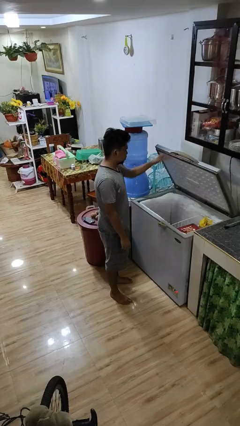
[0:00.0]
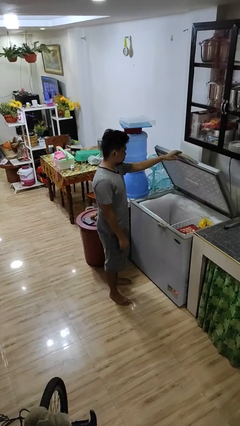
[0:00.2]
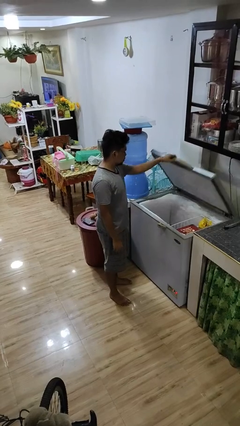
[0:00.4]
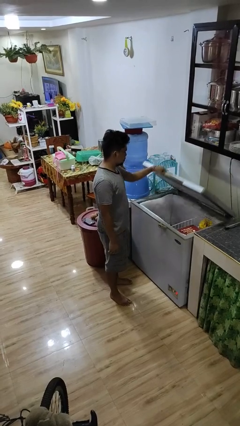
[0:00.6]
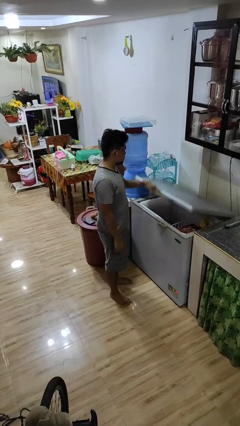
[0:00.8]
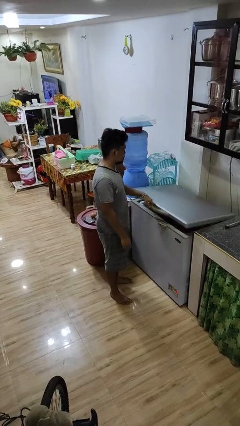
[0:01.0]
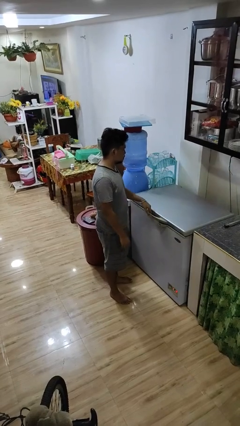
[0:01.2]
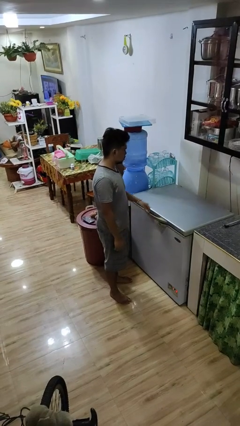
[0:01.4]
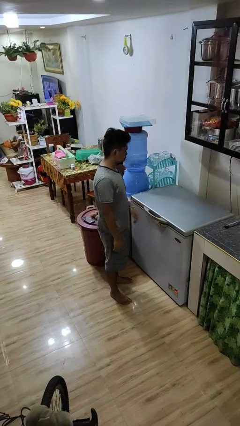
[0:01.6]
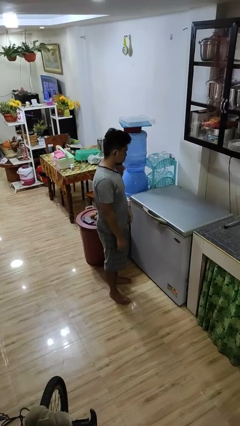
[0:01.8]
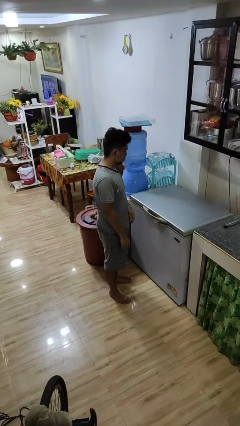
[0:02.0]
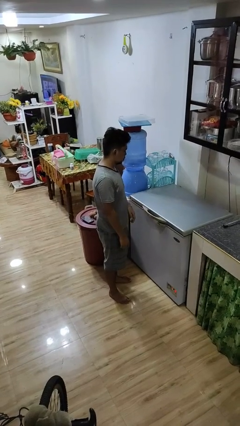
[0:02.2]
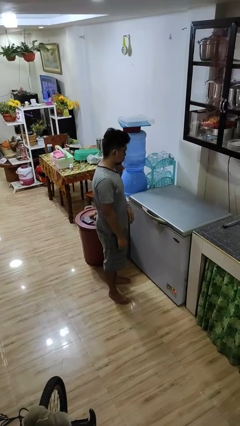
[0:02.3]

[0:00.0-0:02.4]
person closes refrigerator

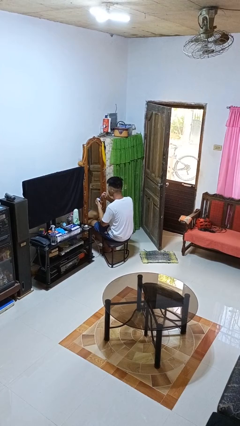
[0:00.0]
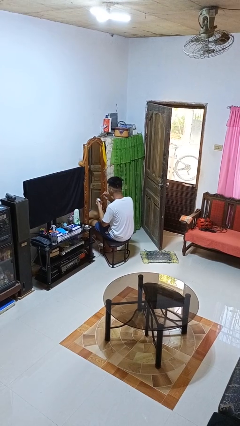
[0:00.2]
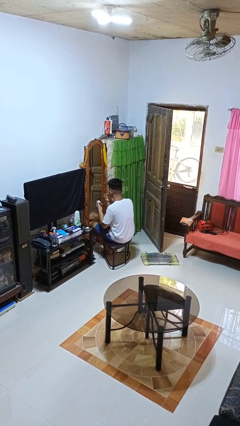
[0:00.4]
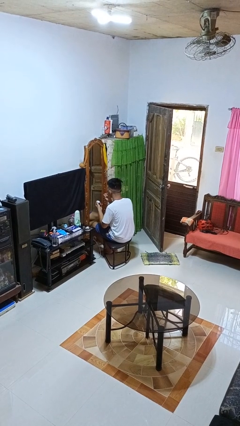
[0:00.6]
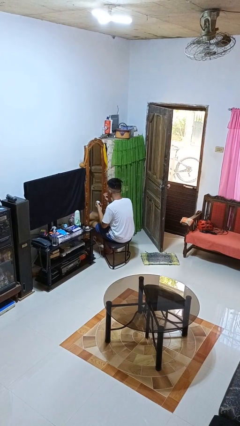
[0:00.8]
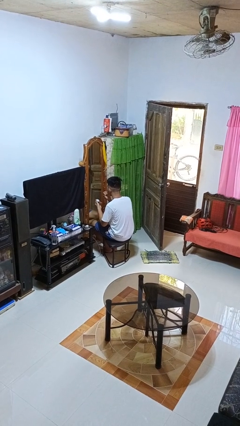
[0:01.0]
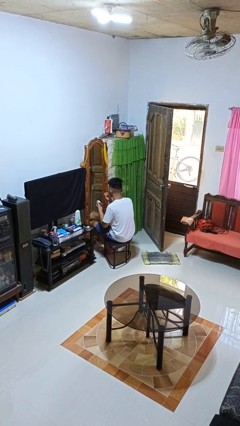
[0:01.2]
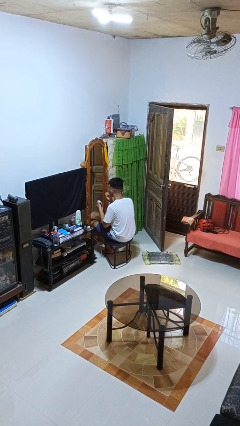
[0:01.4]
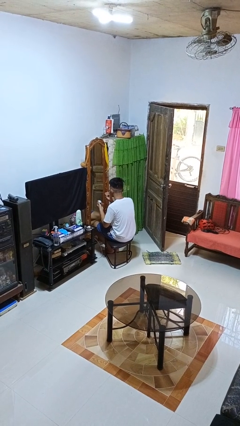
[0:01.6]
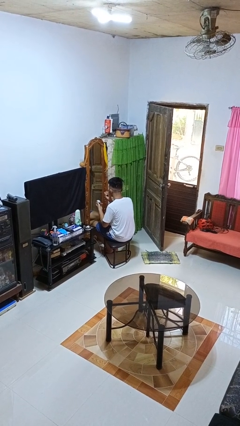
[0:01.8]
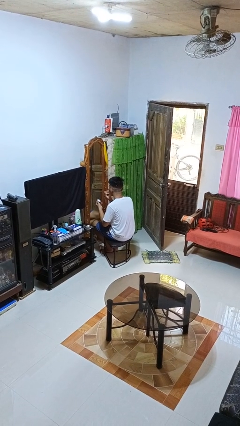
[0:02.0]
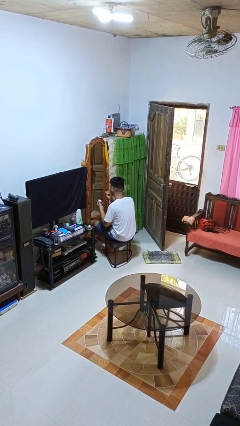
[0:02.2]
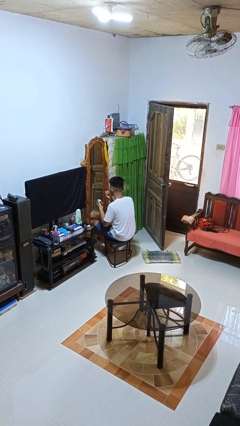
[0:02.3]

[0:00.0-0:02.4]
person applies eye makeup

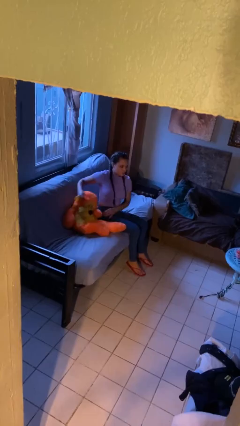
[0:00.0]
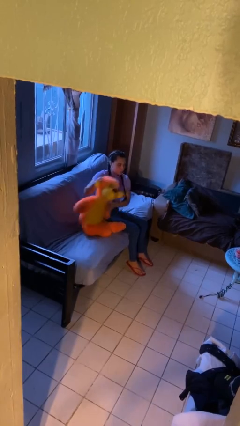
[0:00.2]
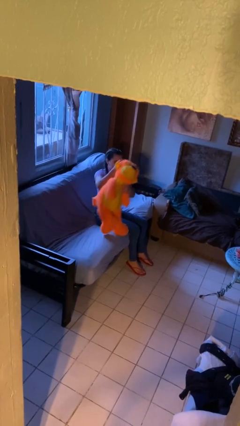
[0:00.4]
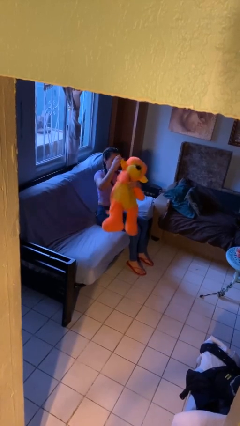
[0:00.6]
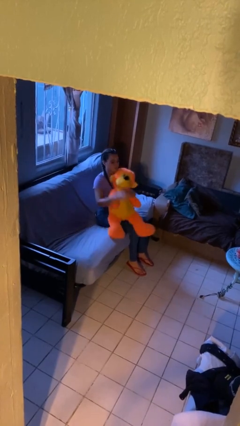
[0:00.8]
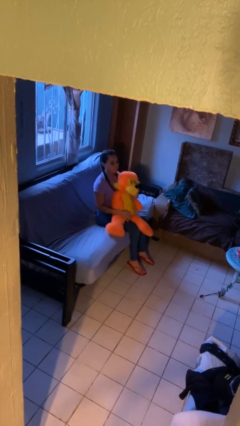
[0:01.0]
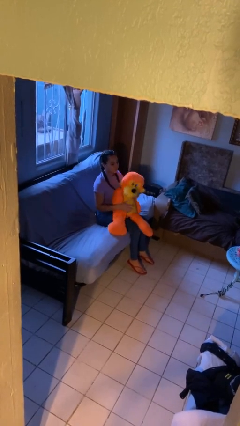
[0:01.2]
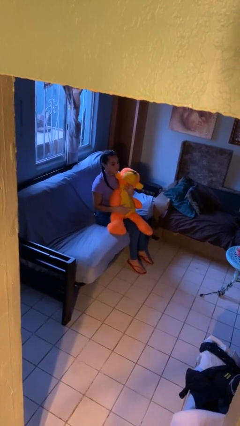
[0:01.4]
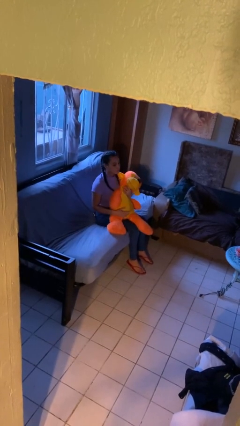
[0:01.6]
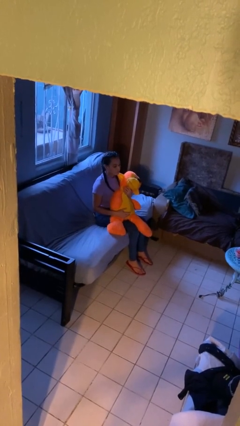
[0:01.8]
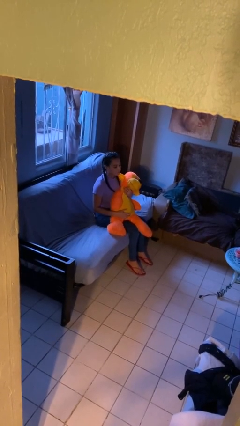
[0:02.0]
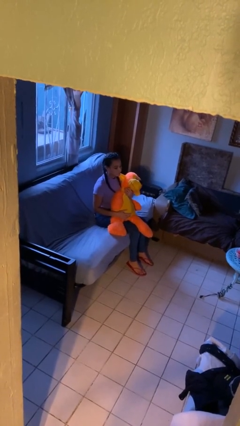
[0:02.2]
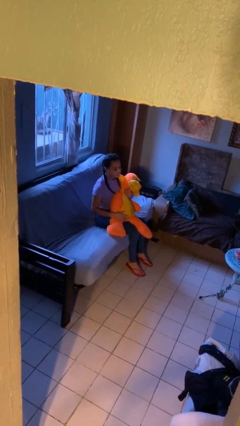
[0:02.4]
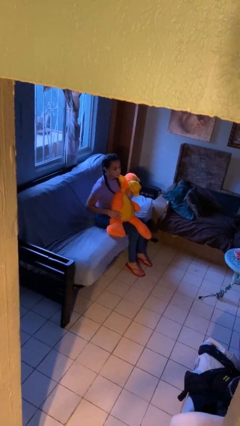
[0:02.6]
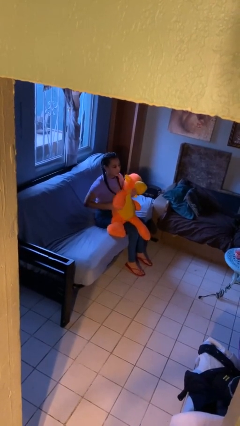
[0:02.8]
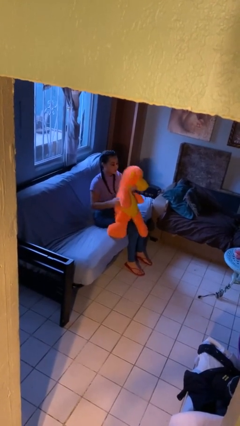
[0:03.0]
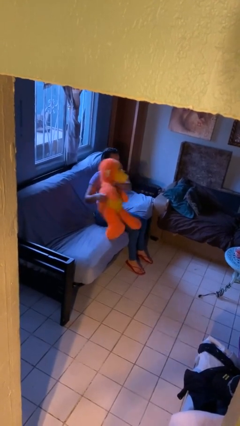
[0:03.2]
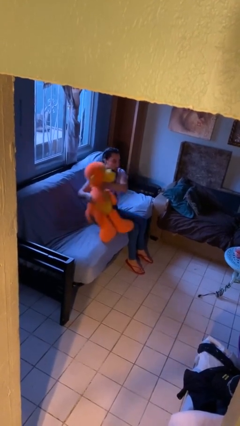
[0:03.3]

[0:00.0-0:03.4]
person hugs stuffed animal

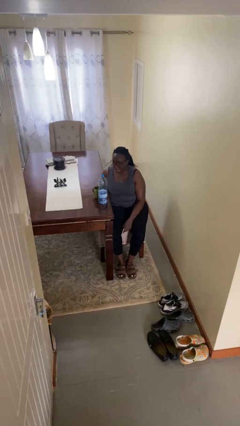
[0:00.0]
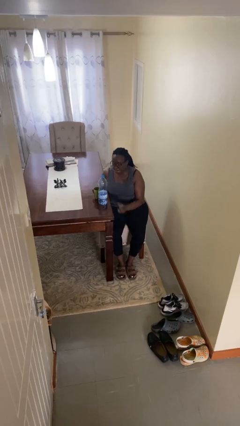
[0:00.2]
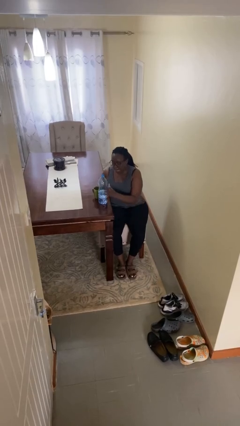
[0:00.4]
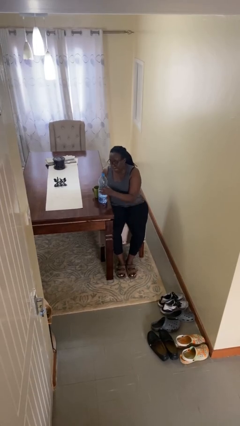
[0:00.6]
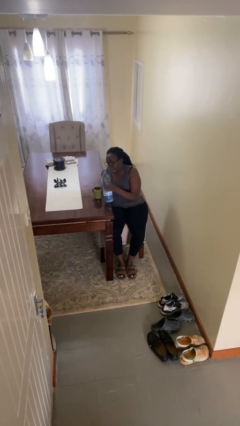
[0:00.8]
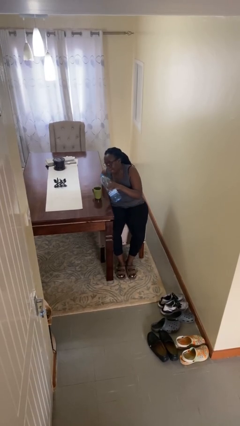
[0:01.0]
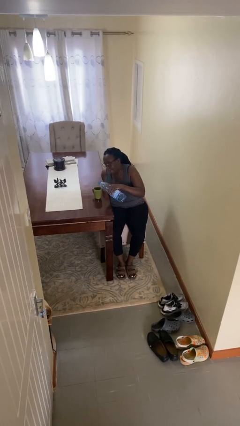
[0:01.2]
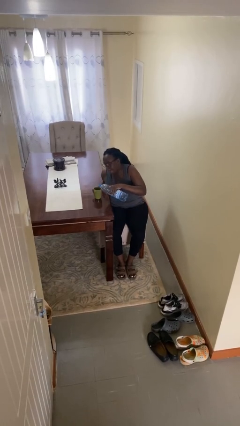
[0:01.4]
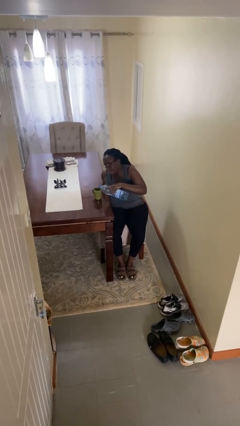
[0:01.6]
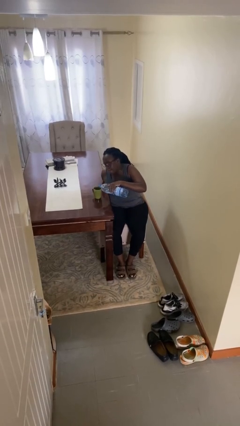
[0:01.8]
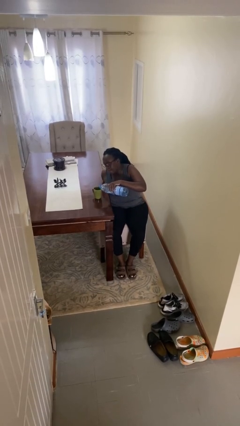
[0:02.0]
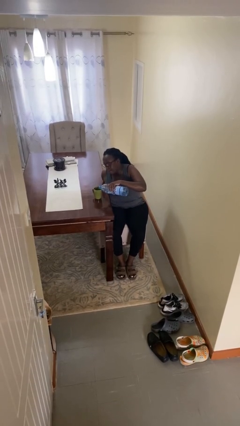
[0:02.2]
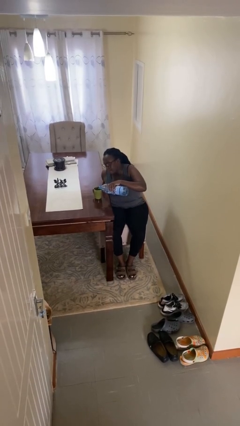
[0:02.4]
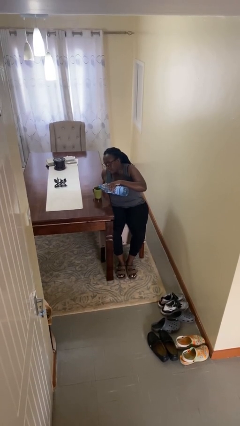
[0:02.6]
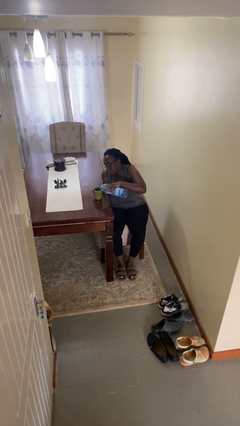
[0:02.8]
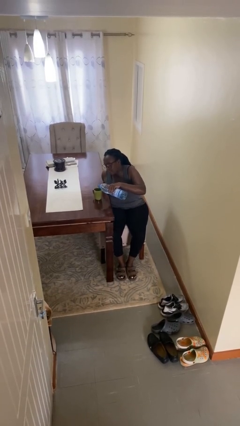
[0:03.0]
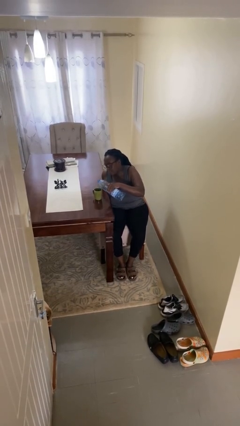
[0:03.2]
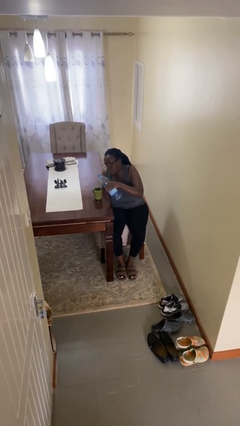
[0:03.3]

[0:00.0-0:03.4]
person pours liquid into cup

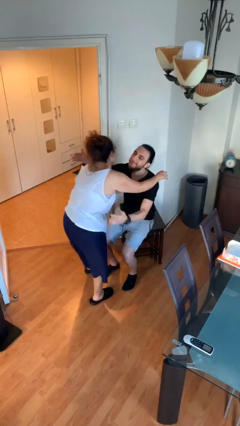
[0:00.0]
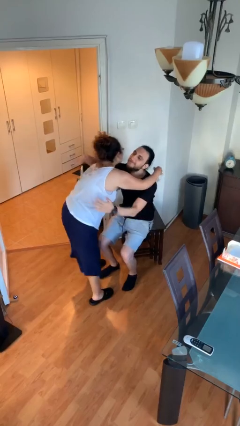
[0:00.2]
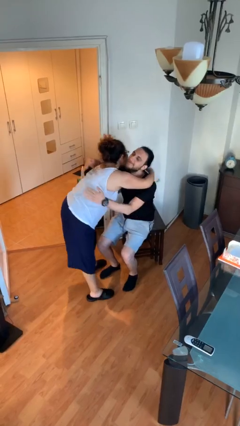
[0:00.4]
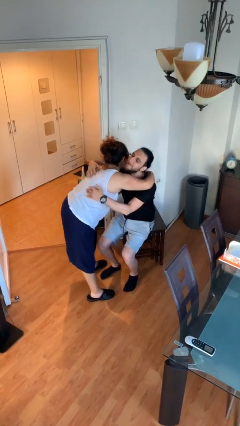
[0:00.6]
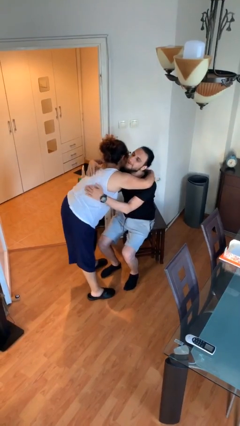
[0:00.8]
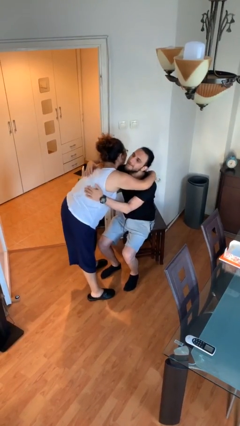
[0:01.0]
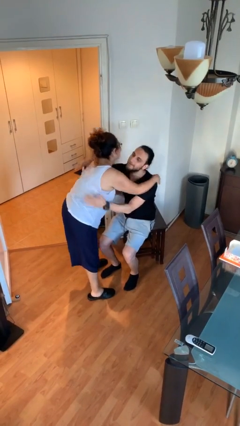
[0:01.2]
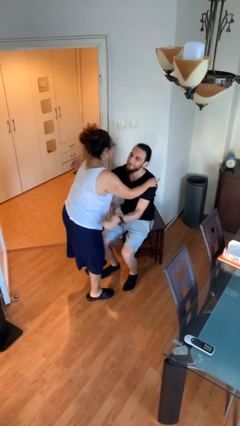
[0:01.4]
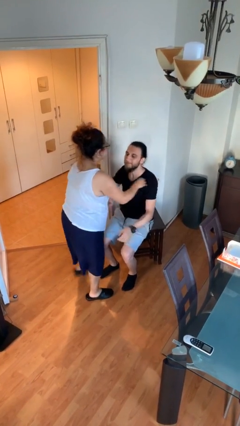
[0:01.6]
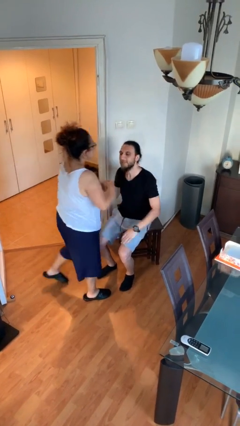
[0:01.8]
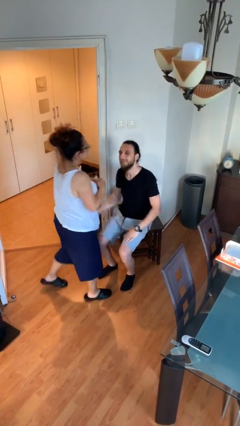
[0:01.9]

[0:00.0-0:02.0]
person embraces person

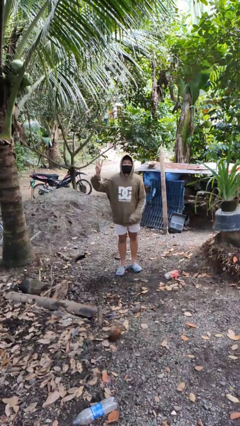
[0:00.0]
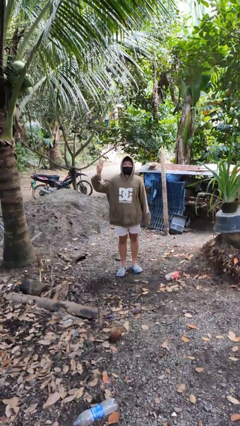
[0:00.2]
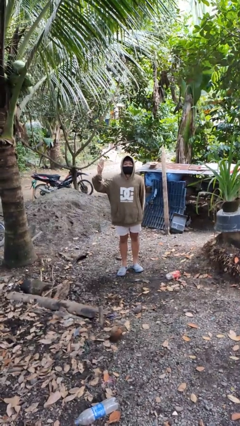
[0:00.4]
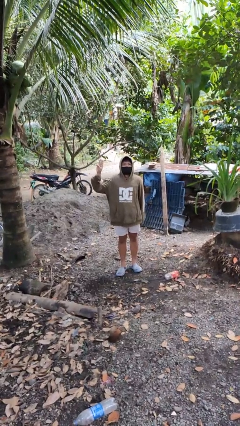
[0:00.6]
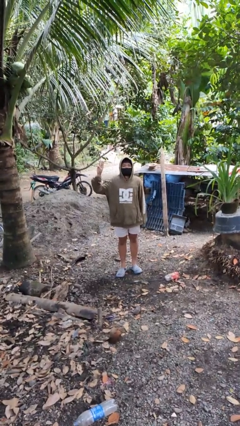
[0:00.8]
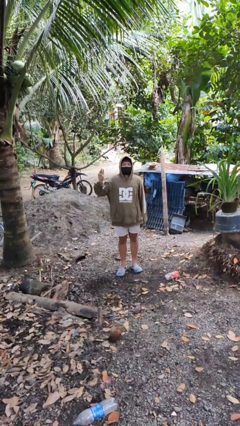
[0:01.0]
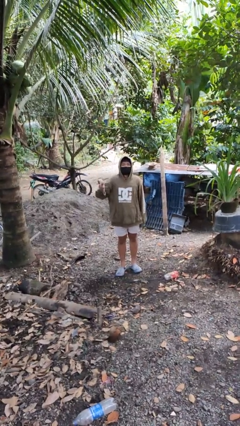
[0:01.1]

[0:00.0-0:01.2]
person gestures number three

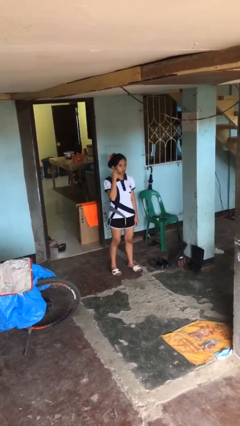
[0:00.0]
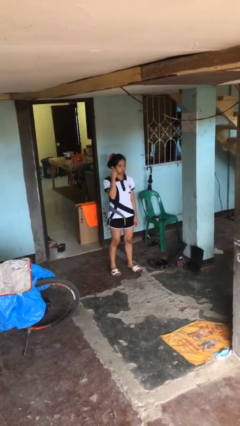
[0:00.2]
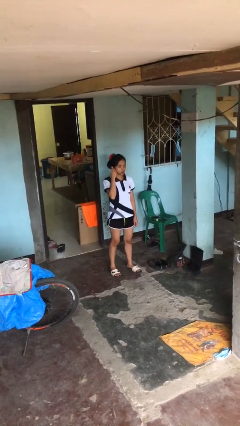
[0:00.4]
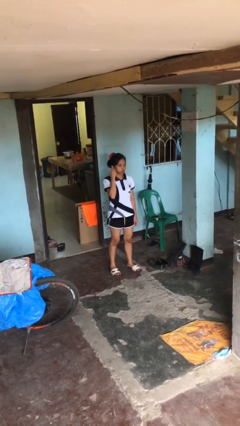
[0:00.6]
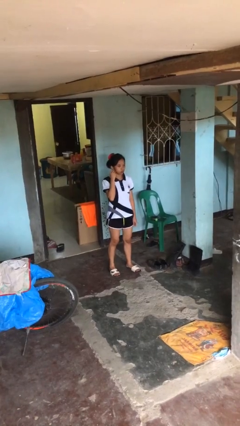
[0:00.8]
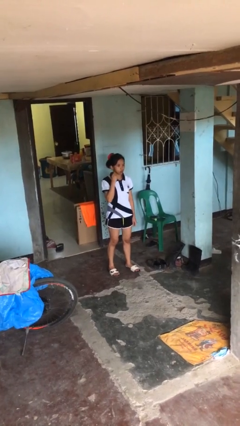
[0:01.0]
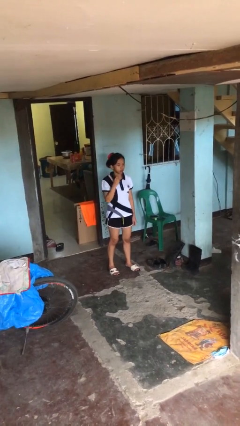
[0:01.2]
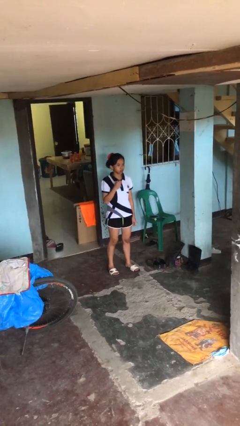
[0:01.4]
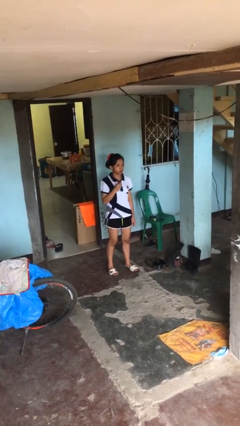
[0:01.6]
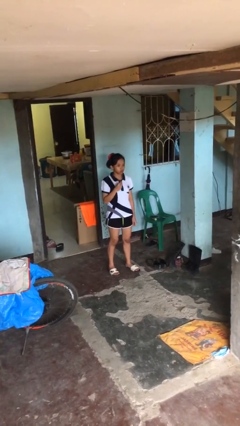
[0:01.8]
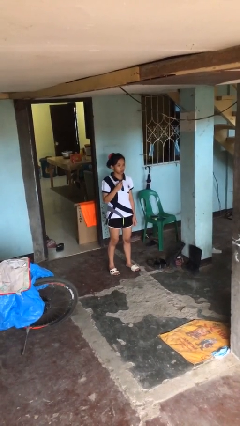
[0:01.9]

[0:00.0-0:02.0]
person takes off earrings
